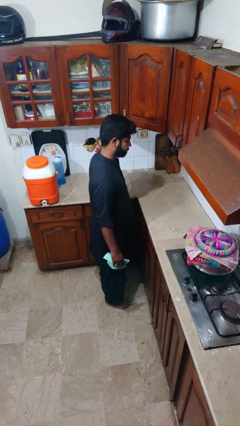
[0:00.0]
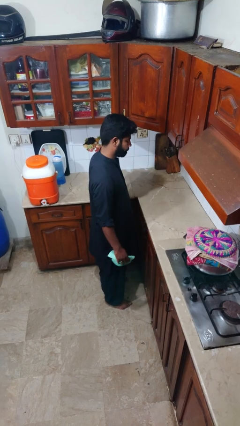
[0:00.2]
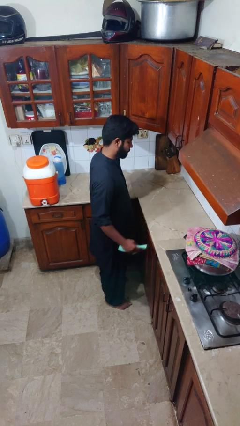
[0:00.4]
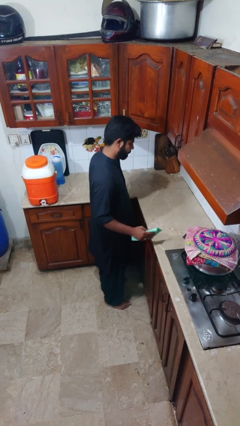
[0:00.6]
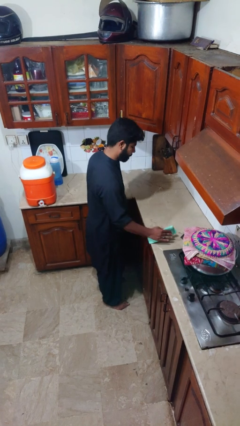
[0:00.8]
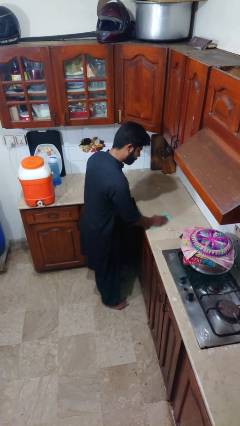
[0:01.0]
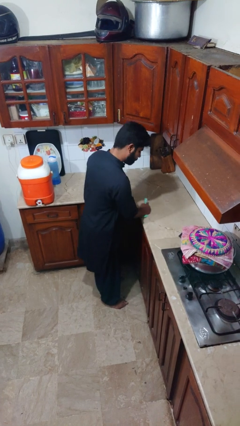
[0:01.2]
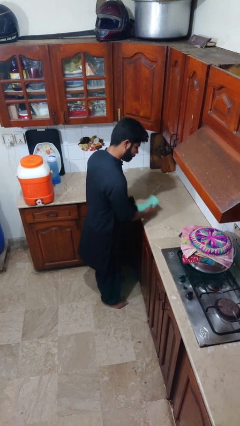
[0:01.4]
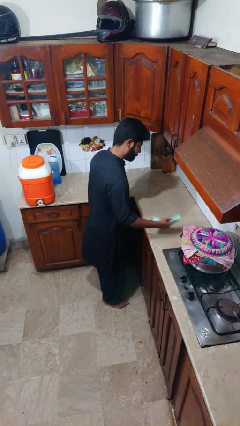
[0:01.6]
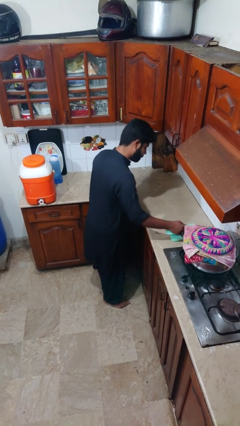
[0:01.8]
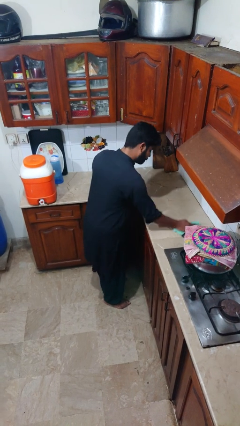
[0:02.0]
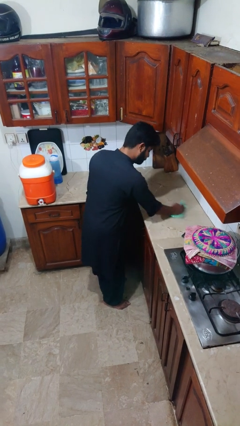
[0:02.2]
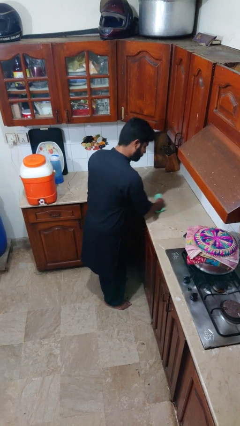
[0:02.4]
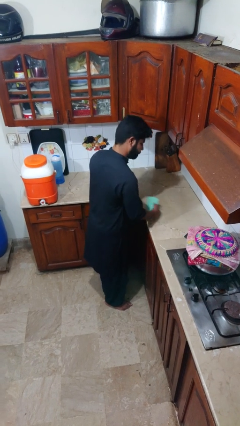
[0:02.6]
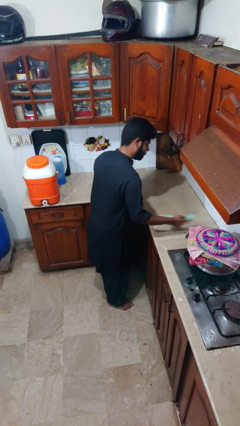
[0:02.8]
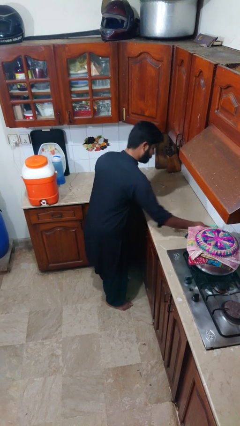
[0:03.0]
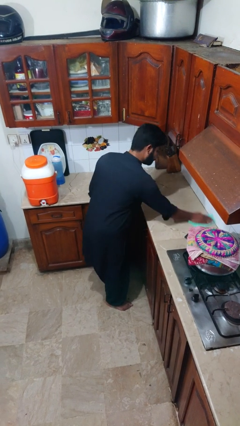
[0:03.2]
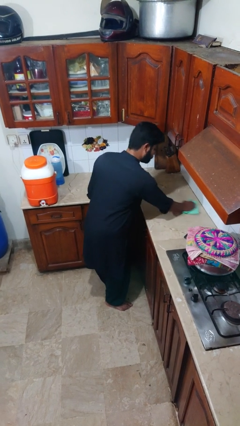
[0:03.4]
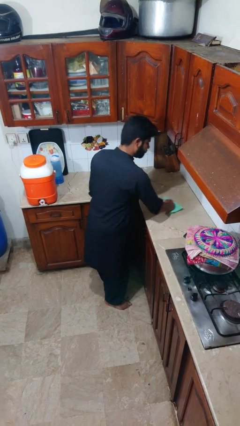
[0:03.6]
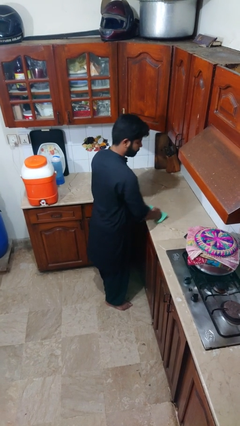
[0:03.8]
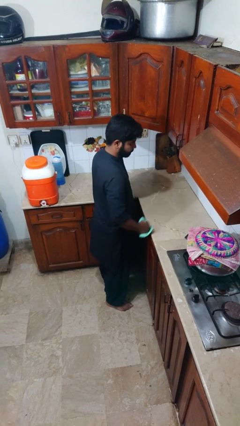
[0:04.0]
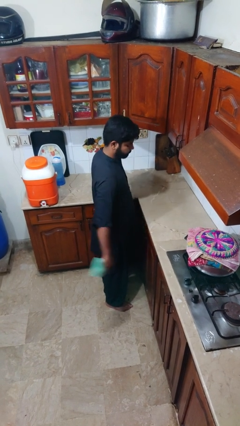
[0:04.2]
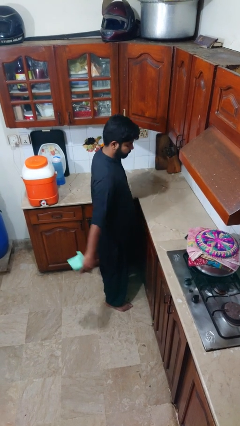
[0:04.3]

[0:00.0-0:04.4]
person cleans table with rag

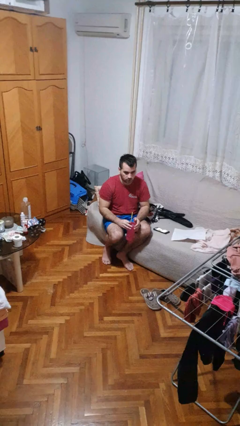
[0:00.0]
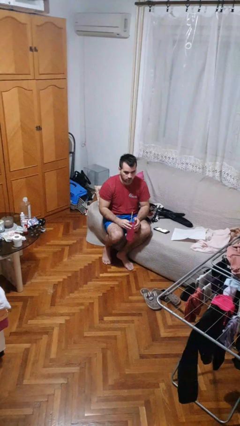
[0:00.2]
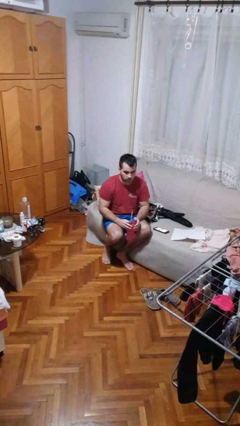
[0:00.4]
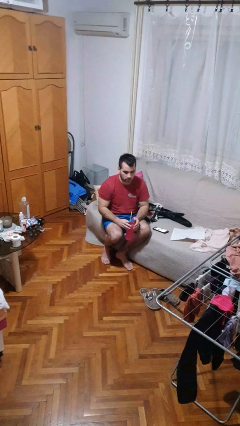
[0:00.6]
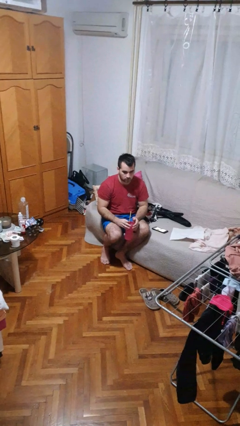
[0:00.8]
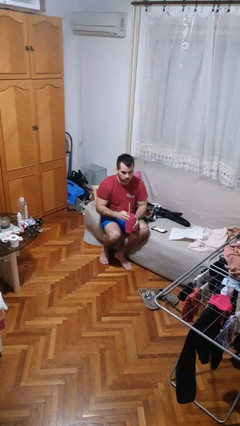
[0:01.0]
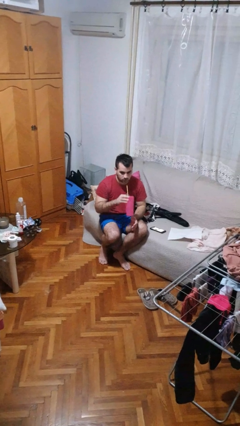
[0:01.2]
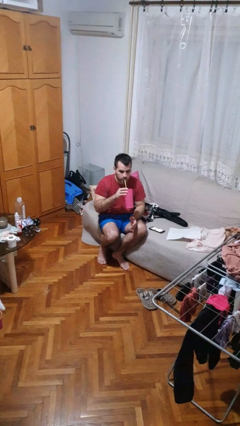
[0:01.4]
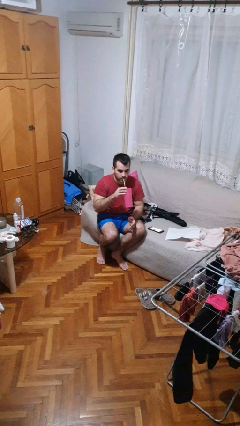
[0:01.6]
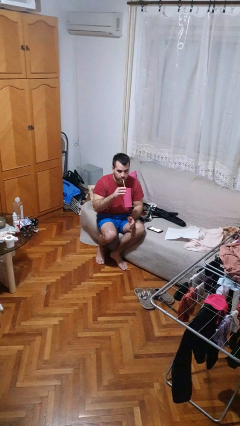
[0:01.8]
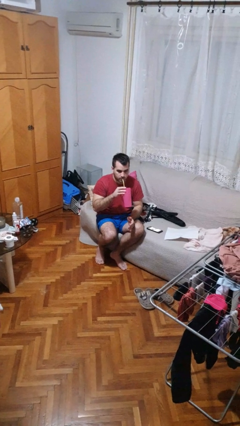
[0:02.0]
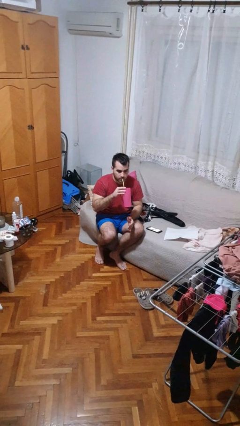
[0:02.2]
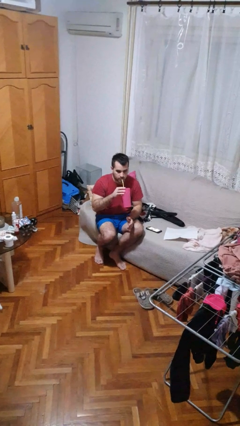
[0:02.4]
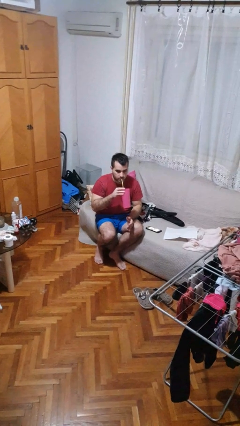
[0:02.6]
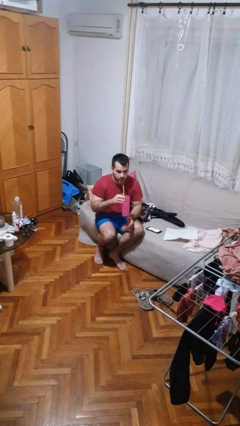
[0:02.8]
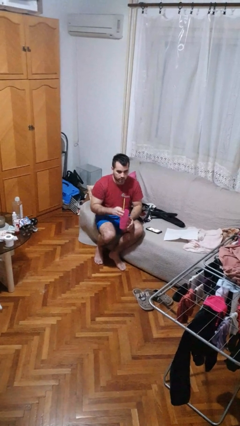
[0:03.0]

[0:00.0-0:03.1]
person drinks from straw

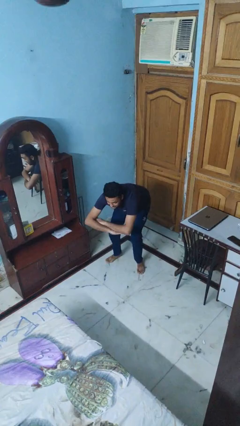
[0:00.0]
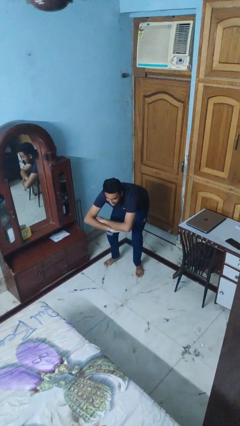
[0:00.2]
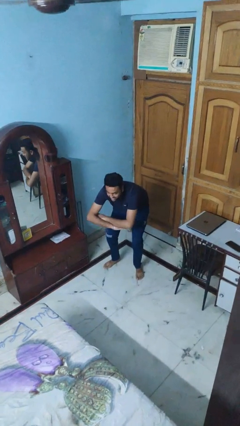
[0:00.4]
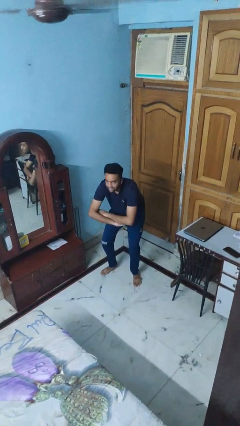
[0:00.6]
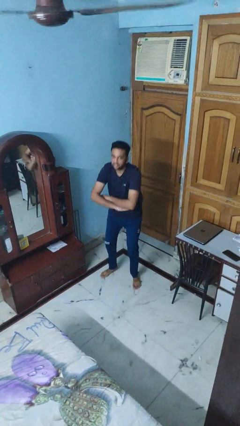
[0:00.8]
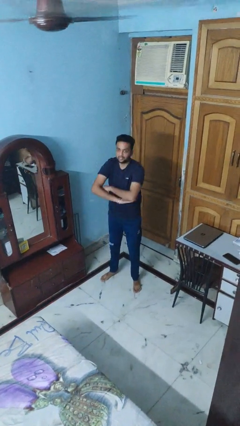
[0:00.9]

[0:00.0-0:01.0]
person stands up

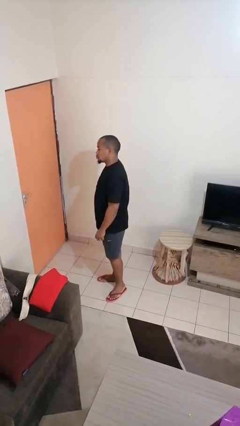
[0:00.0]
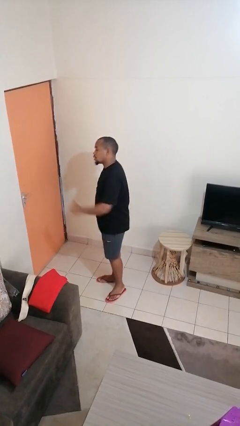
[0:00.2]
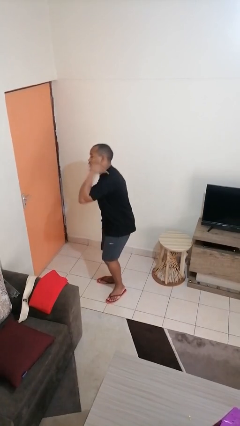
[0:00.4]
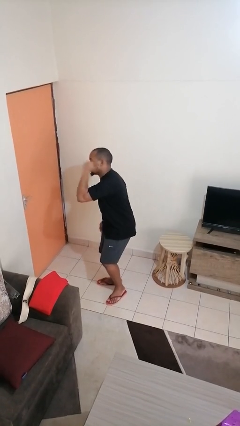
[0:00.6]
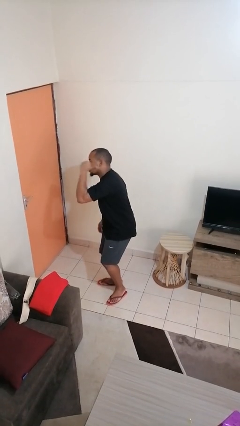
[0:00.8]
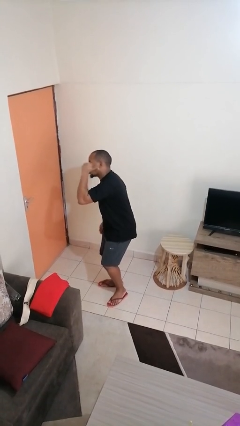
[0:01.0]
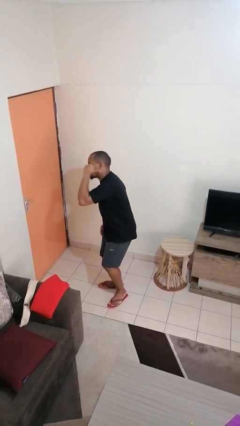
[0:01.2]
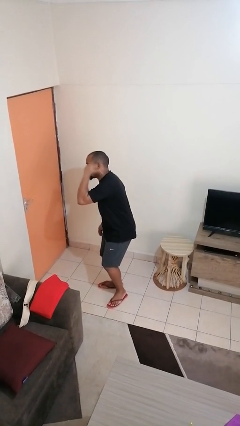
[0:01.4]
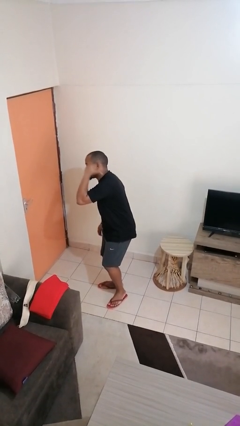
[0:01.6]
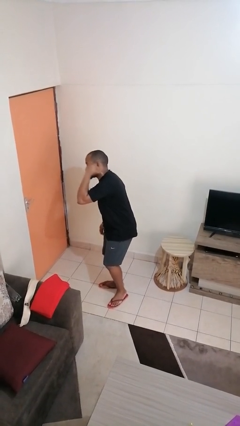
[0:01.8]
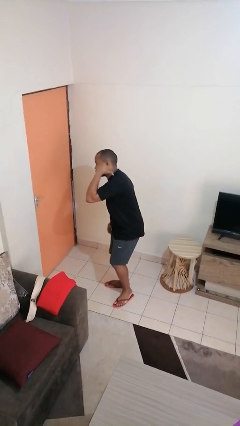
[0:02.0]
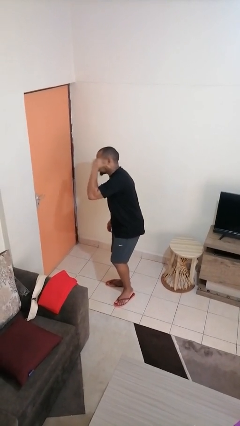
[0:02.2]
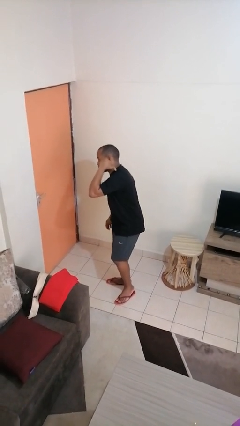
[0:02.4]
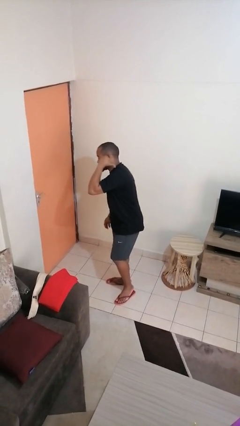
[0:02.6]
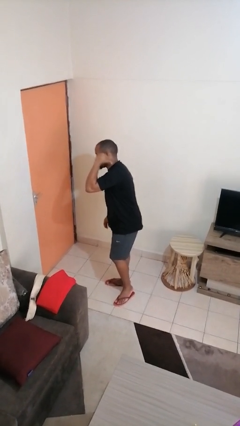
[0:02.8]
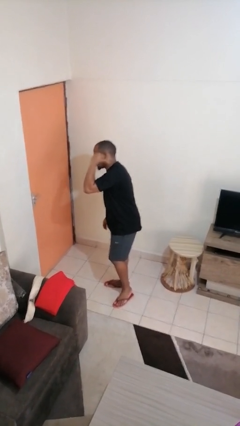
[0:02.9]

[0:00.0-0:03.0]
person gestures behind me

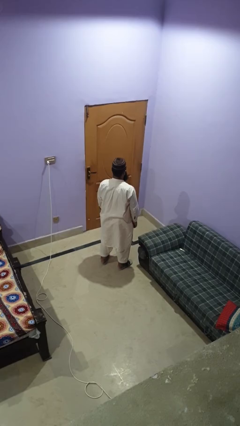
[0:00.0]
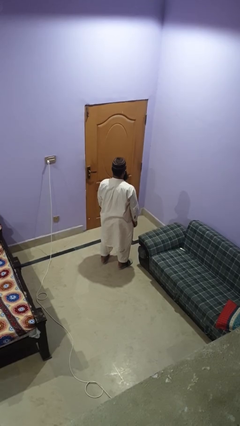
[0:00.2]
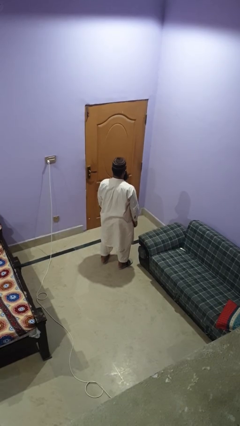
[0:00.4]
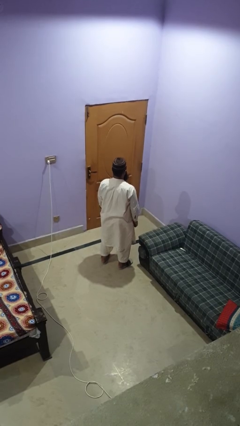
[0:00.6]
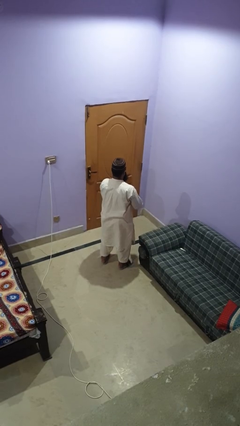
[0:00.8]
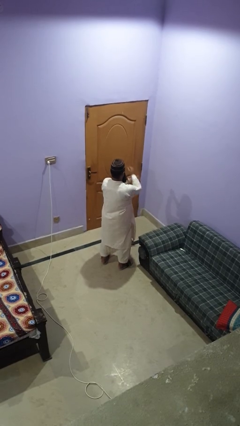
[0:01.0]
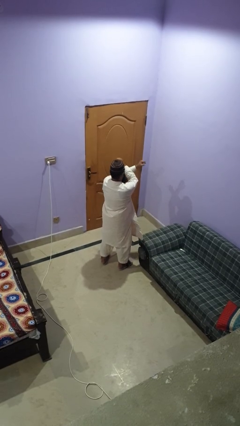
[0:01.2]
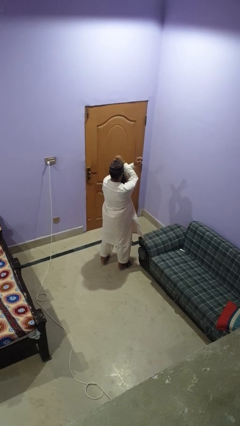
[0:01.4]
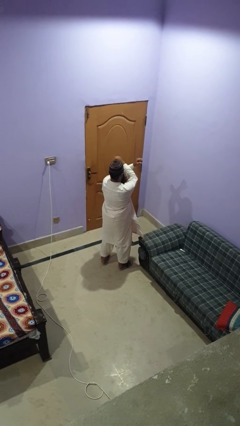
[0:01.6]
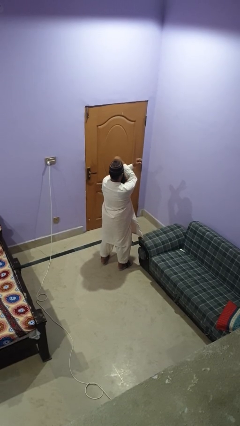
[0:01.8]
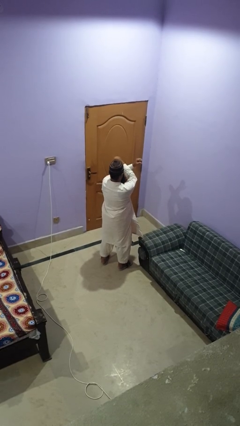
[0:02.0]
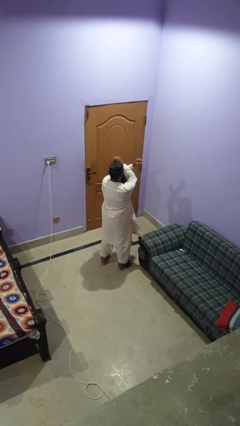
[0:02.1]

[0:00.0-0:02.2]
person gestures arms x

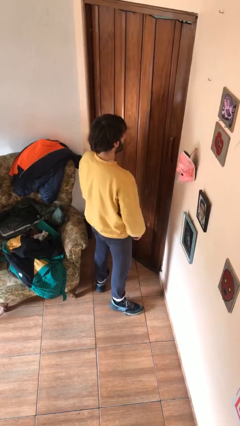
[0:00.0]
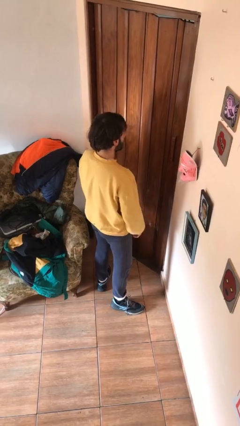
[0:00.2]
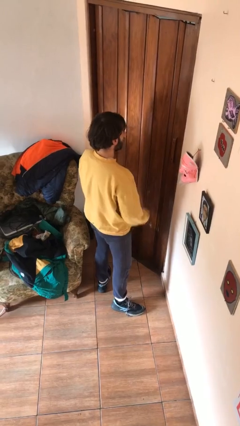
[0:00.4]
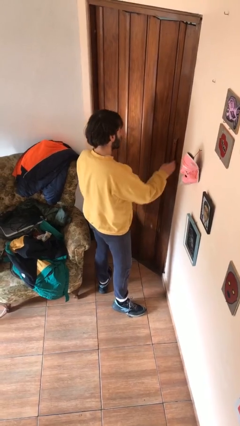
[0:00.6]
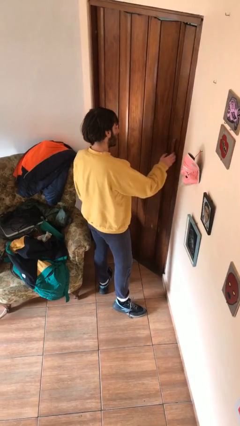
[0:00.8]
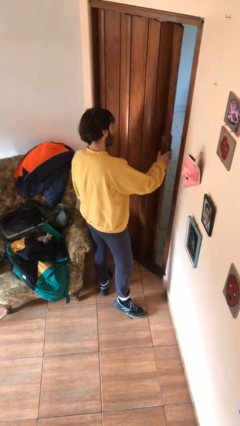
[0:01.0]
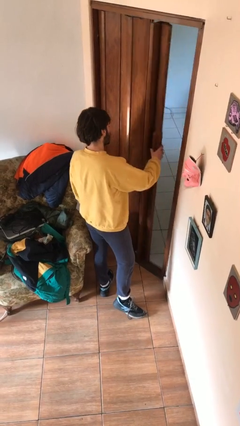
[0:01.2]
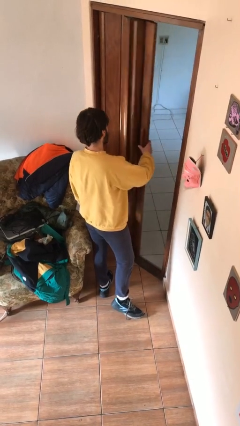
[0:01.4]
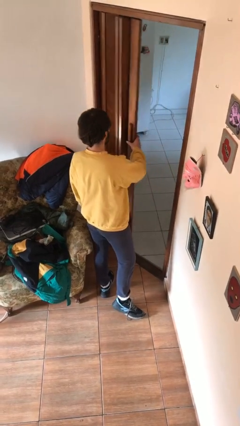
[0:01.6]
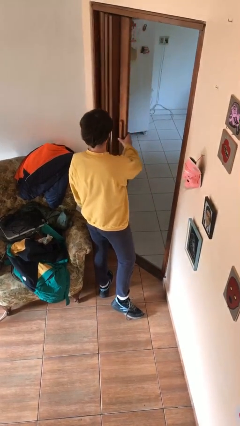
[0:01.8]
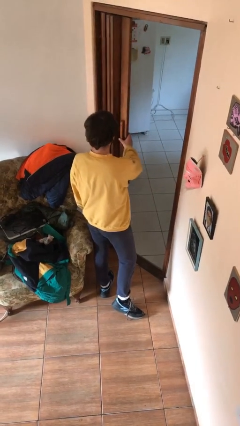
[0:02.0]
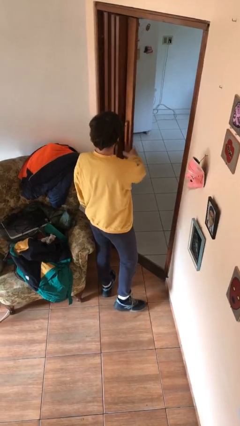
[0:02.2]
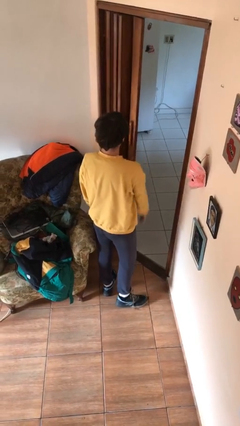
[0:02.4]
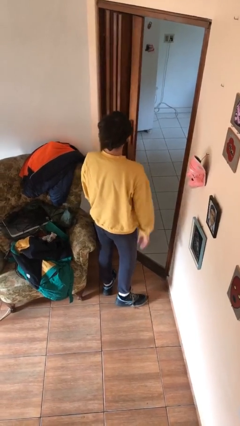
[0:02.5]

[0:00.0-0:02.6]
person opens sliding door

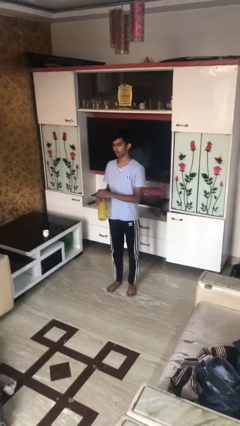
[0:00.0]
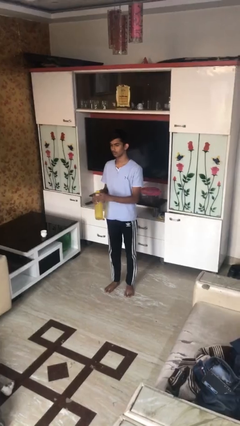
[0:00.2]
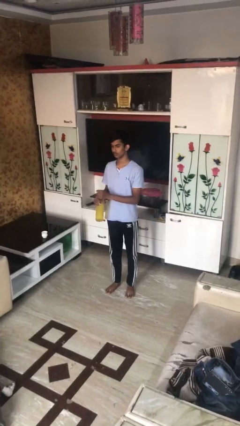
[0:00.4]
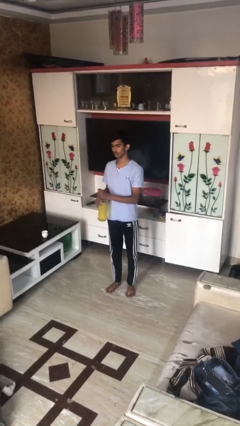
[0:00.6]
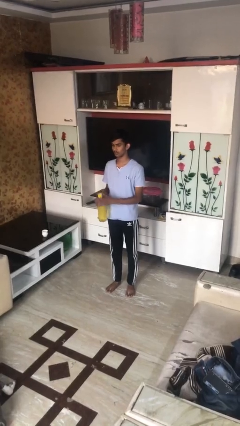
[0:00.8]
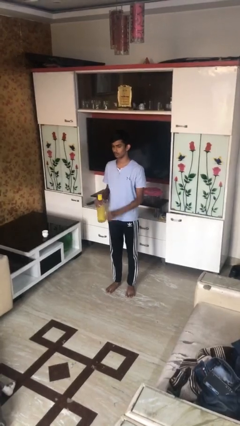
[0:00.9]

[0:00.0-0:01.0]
person screws lid to bottle

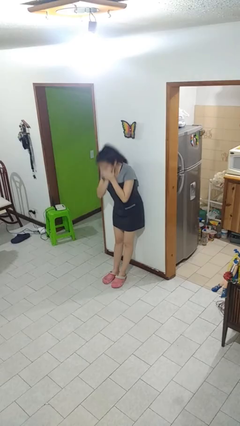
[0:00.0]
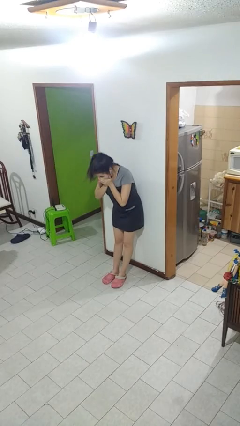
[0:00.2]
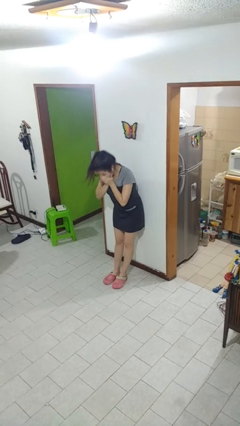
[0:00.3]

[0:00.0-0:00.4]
person sneezes into hand
